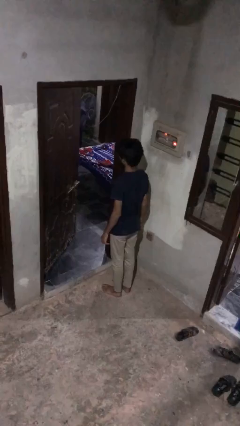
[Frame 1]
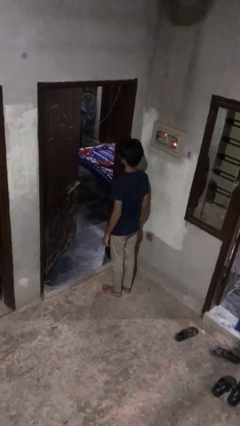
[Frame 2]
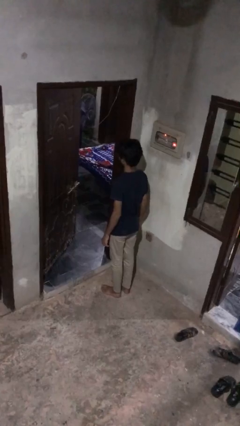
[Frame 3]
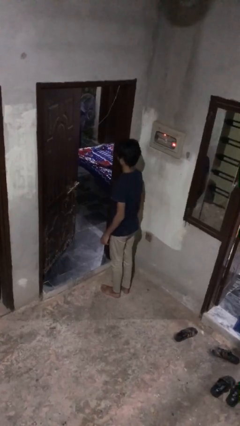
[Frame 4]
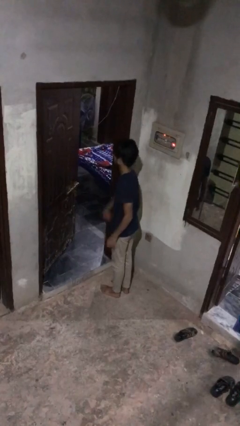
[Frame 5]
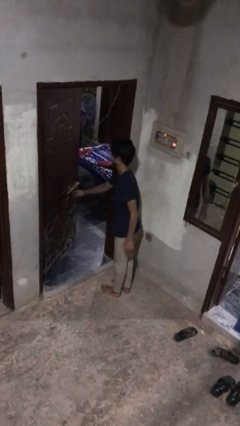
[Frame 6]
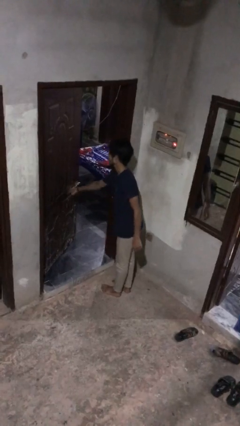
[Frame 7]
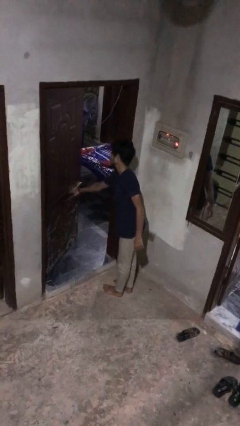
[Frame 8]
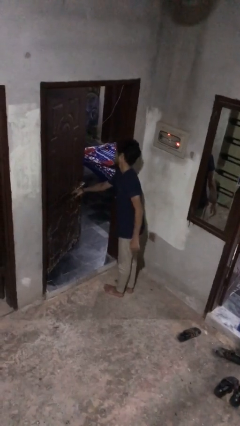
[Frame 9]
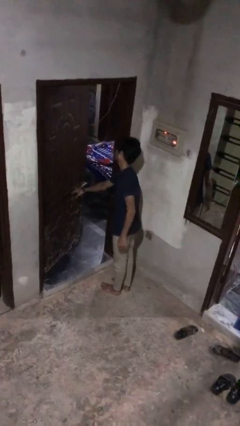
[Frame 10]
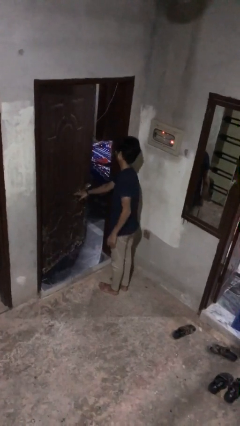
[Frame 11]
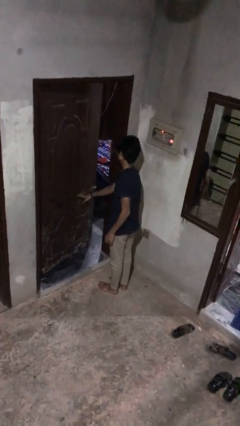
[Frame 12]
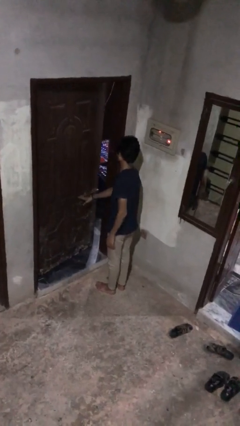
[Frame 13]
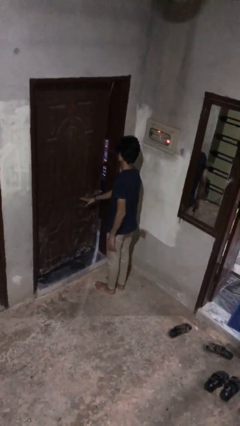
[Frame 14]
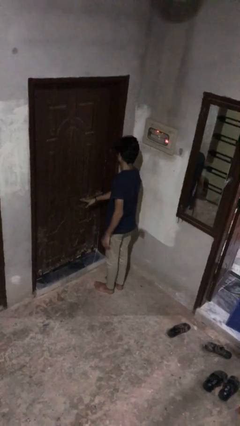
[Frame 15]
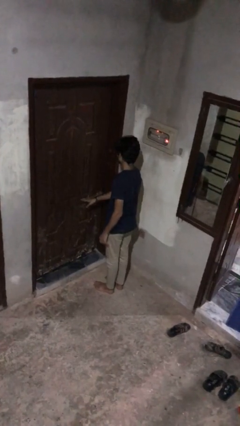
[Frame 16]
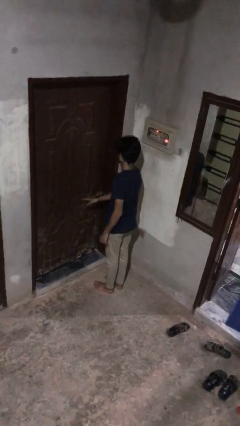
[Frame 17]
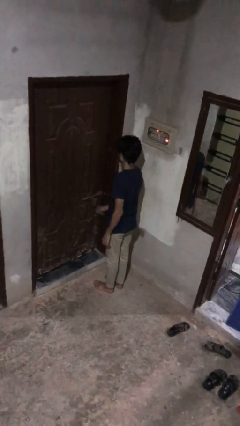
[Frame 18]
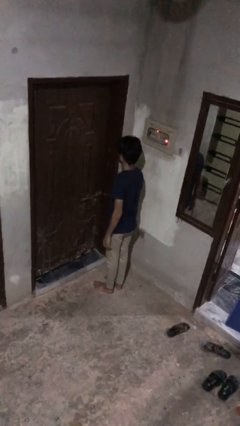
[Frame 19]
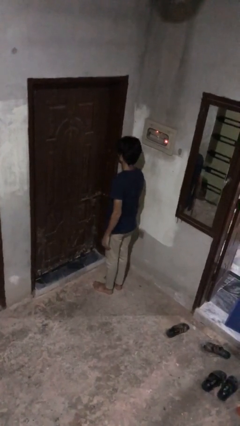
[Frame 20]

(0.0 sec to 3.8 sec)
person closes facility door

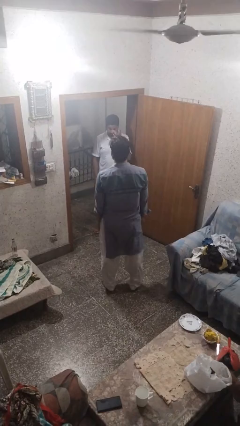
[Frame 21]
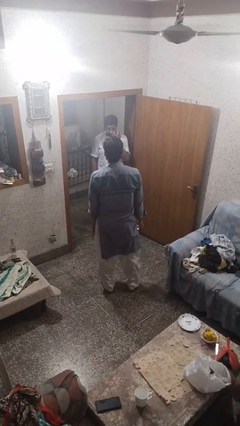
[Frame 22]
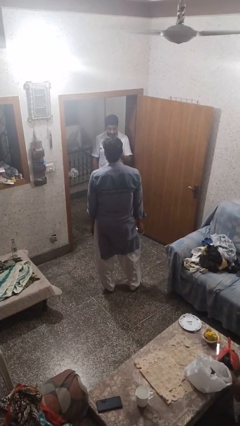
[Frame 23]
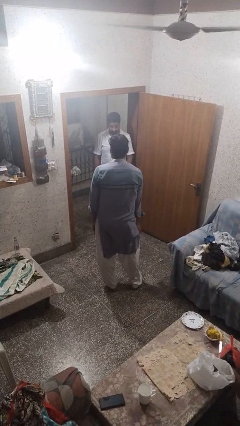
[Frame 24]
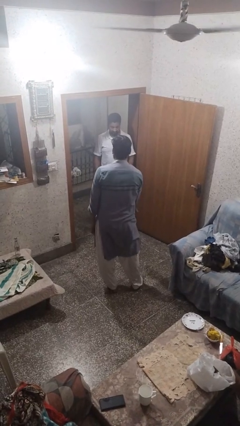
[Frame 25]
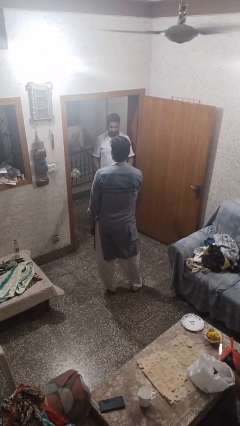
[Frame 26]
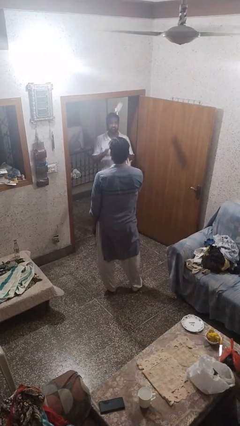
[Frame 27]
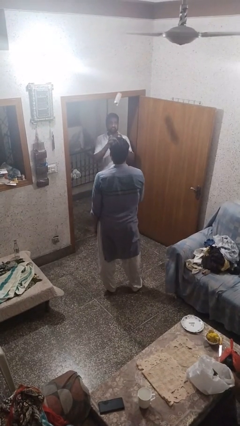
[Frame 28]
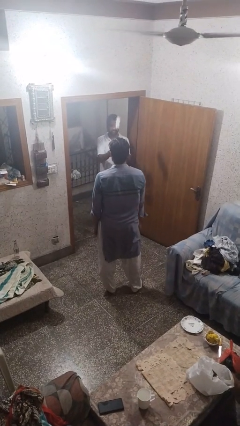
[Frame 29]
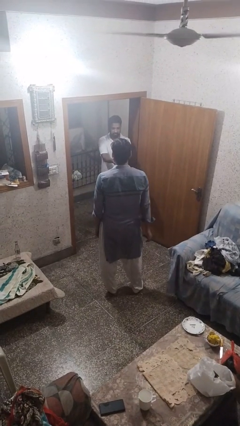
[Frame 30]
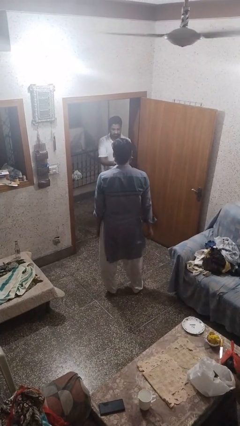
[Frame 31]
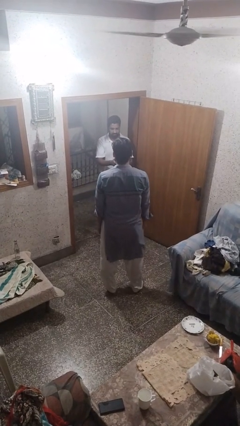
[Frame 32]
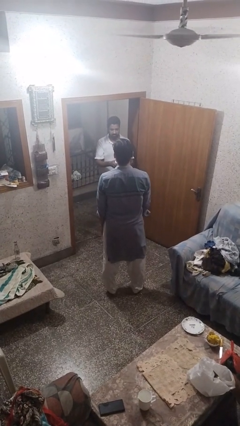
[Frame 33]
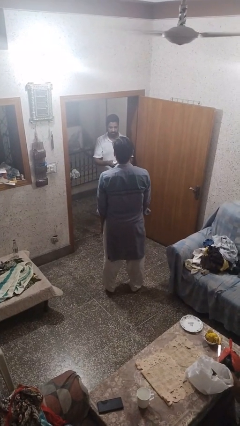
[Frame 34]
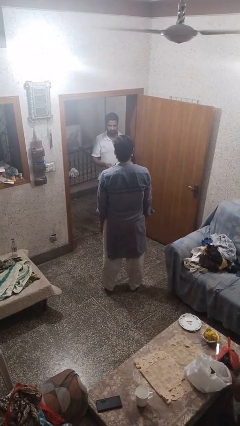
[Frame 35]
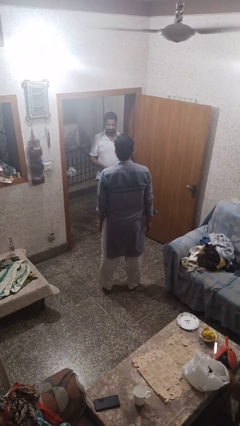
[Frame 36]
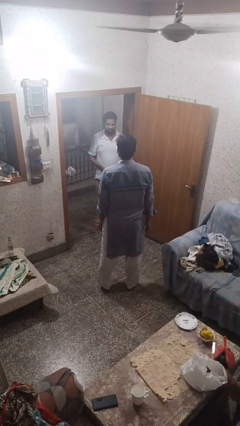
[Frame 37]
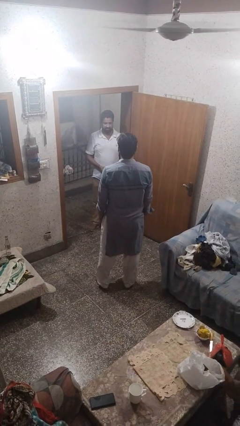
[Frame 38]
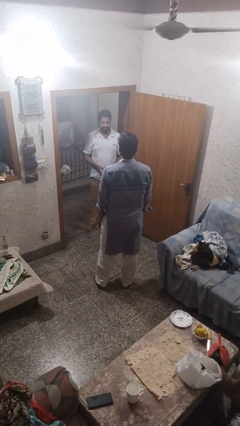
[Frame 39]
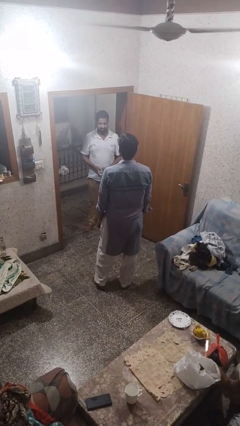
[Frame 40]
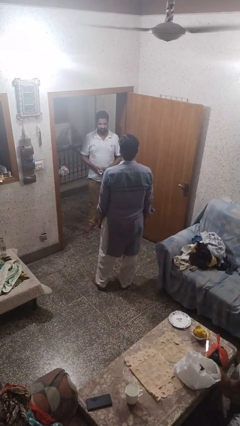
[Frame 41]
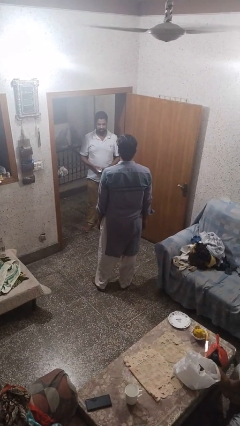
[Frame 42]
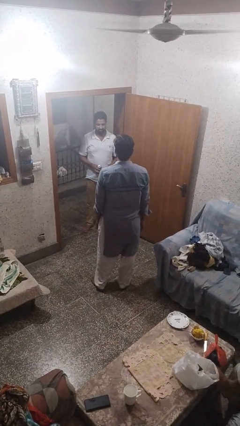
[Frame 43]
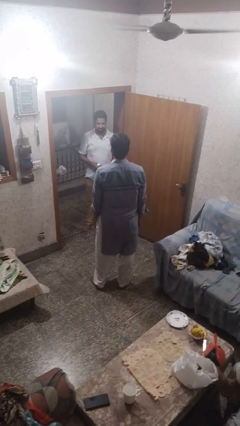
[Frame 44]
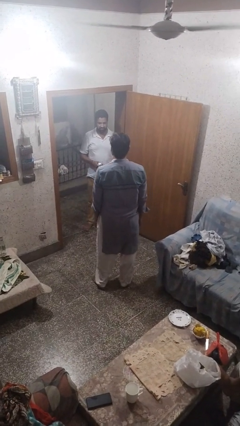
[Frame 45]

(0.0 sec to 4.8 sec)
person throws object to person

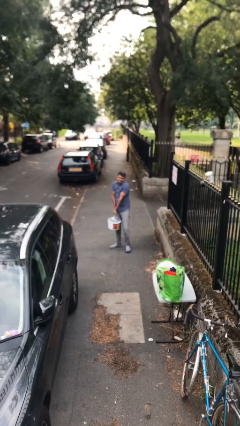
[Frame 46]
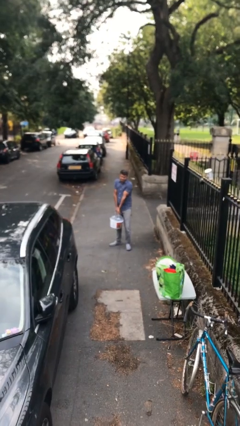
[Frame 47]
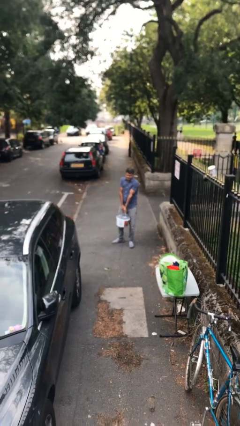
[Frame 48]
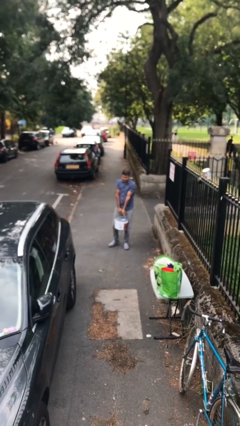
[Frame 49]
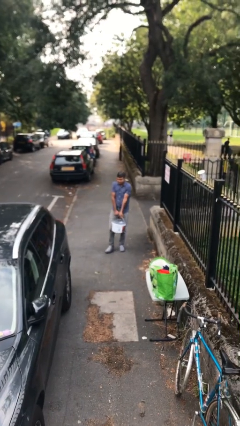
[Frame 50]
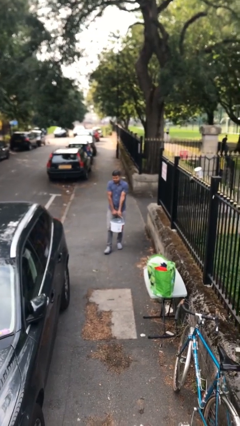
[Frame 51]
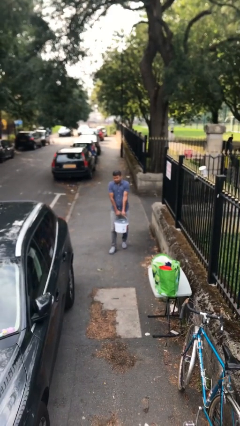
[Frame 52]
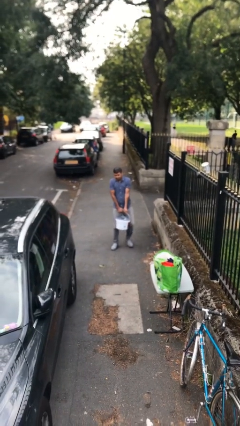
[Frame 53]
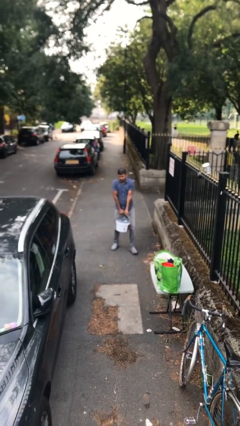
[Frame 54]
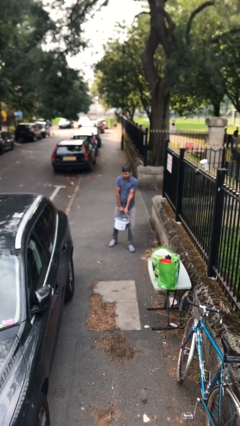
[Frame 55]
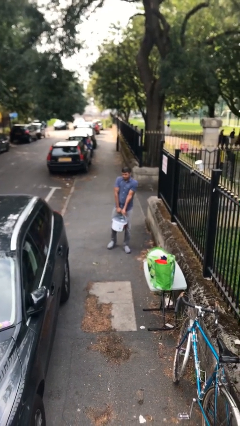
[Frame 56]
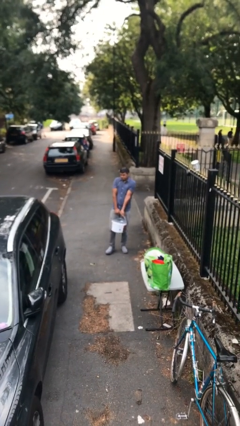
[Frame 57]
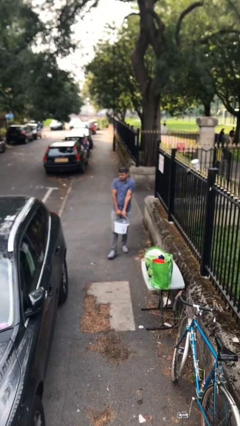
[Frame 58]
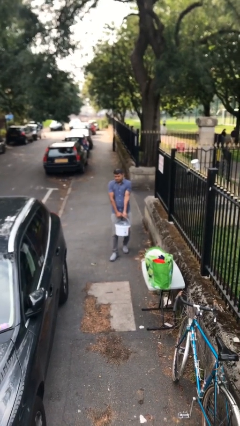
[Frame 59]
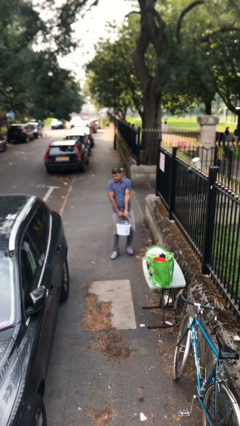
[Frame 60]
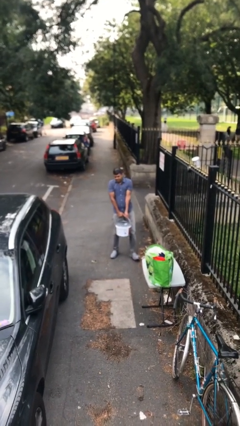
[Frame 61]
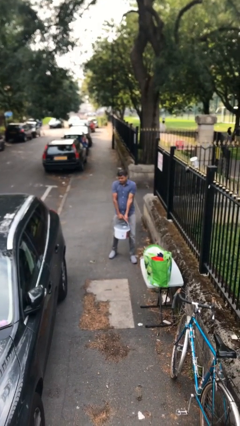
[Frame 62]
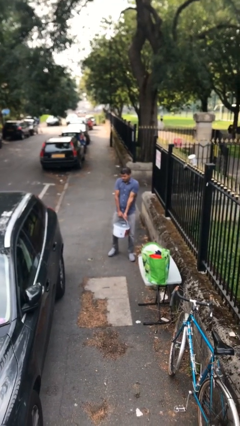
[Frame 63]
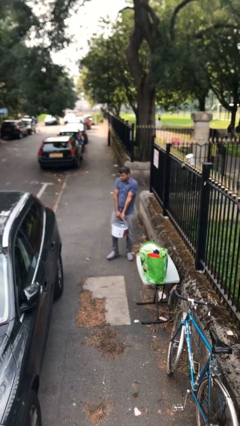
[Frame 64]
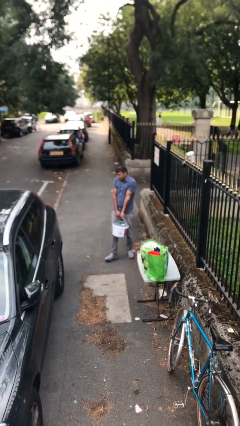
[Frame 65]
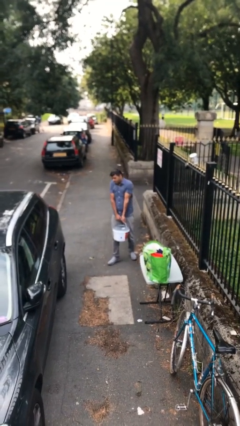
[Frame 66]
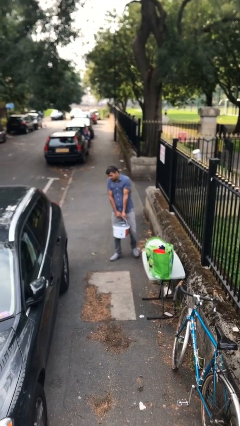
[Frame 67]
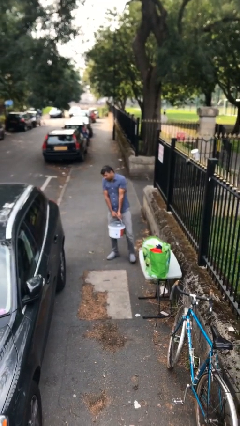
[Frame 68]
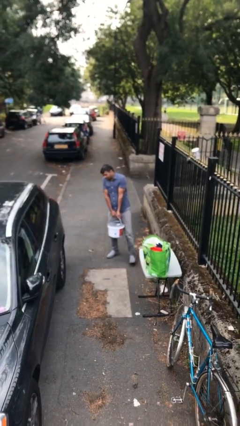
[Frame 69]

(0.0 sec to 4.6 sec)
person carries heavy object

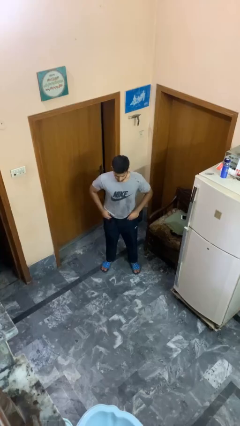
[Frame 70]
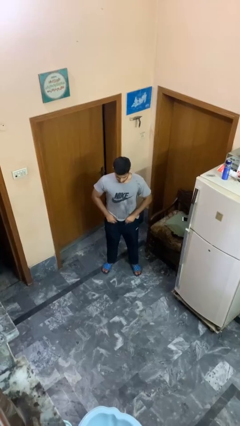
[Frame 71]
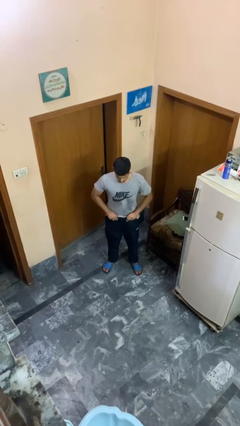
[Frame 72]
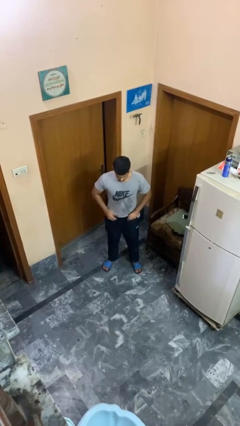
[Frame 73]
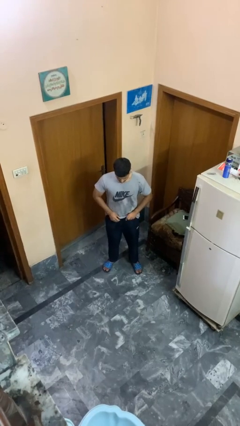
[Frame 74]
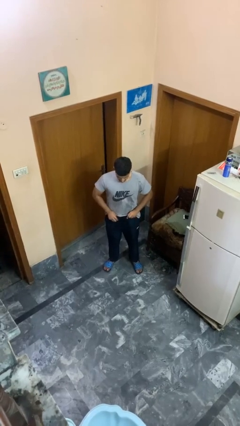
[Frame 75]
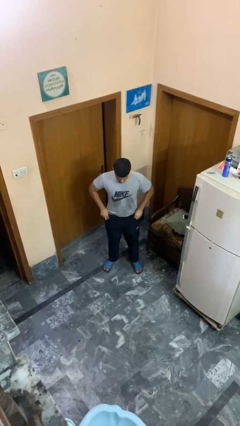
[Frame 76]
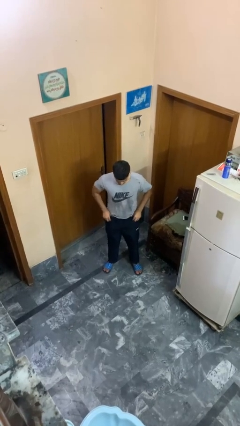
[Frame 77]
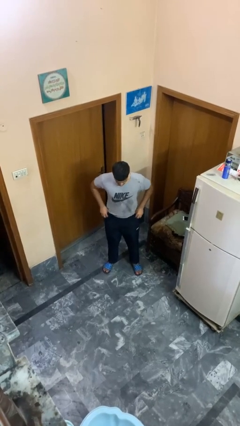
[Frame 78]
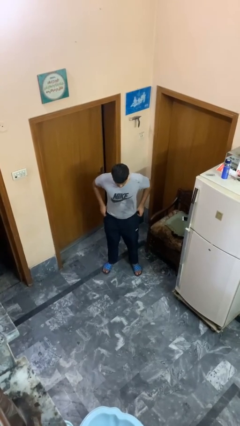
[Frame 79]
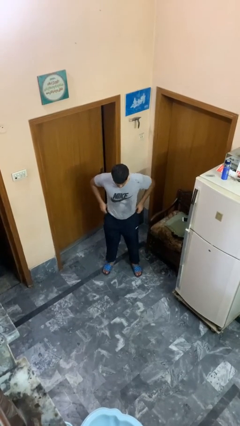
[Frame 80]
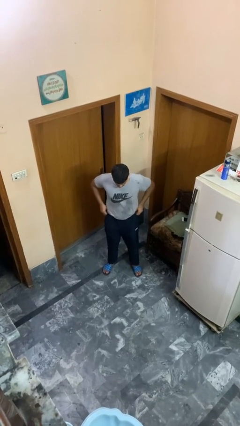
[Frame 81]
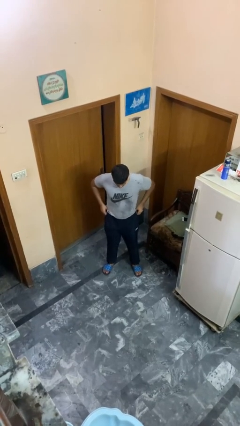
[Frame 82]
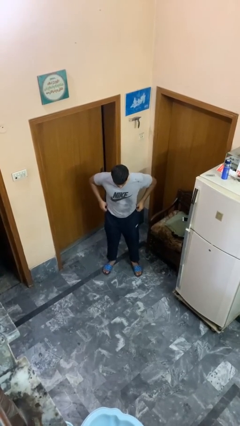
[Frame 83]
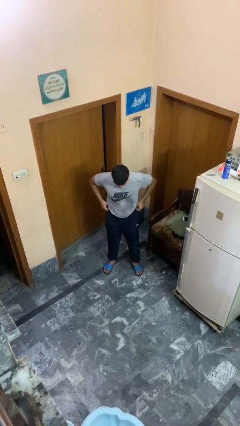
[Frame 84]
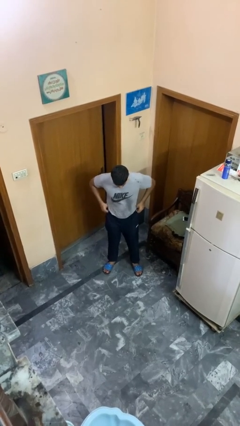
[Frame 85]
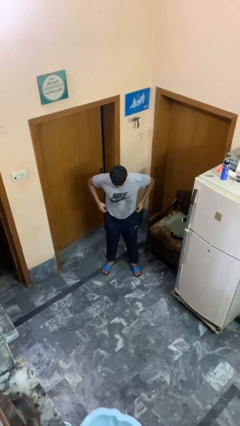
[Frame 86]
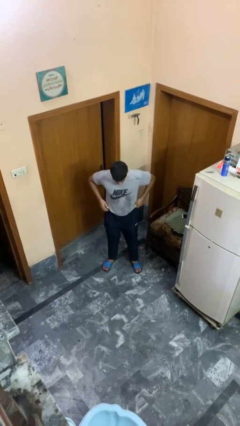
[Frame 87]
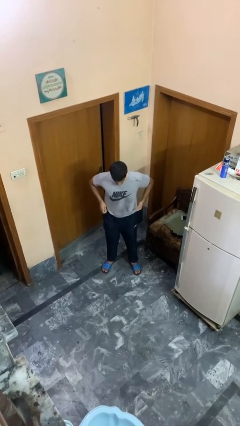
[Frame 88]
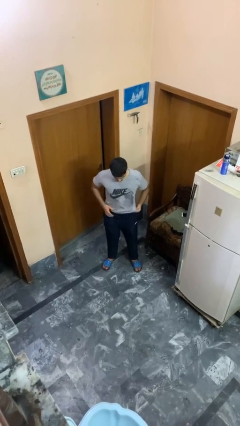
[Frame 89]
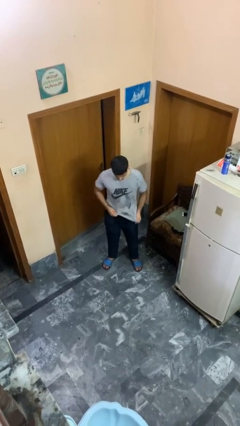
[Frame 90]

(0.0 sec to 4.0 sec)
person hikes up pants

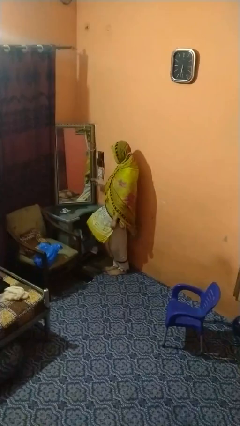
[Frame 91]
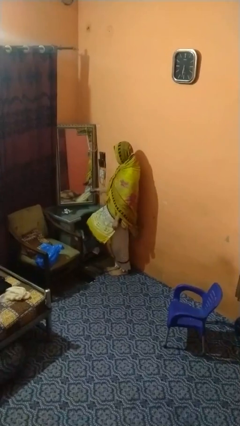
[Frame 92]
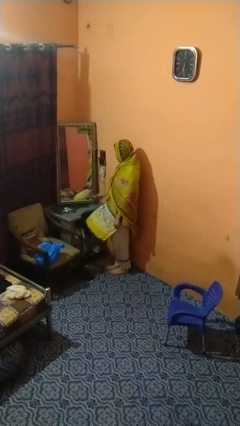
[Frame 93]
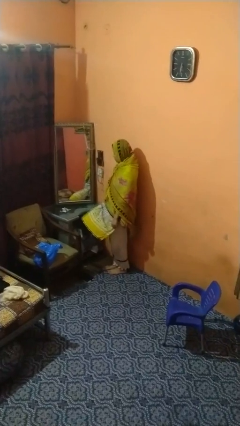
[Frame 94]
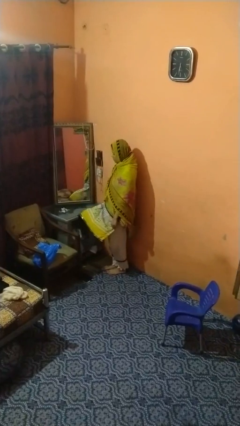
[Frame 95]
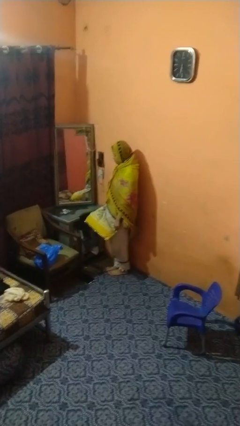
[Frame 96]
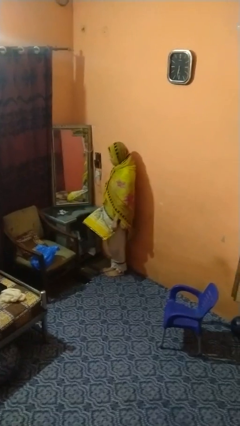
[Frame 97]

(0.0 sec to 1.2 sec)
person unplugs from electrical socket
